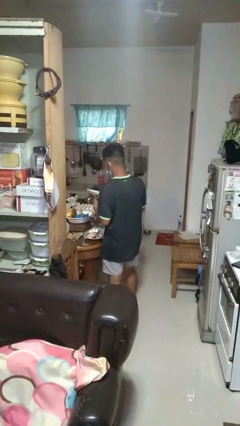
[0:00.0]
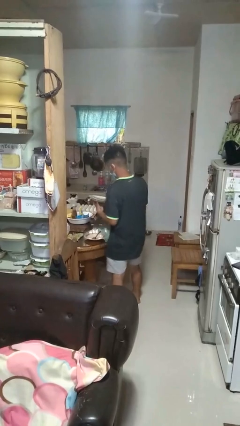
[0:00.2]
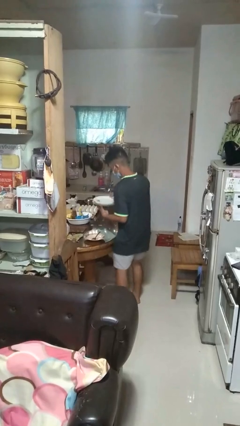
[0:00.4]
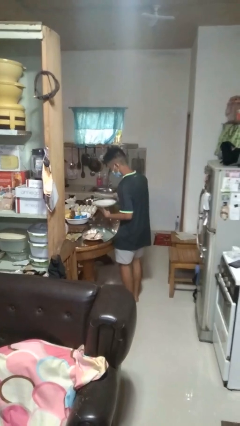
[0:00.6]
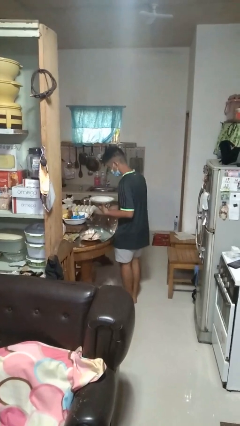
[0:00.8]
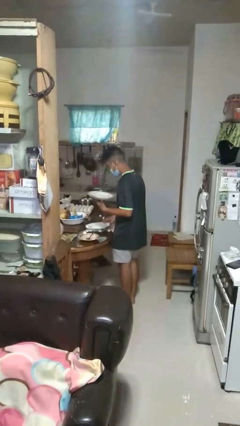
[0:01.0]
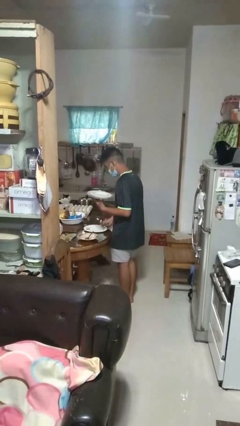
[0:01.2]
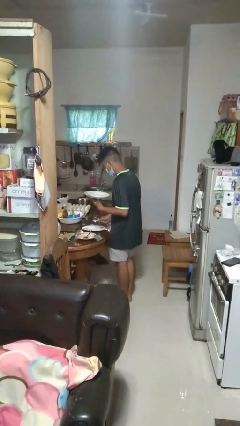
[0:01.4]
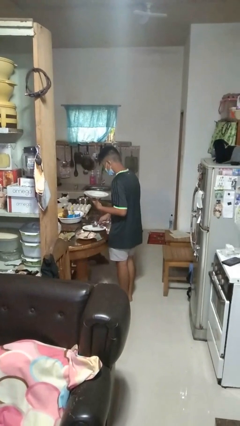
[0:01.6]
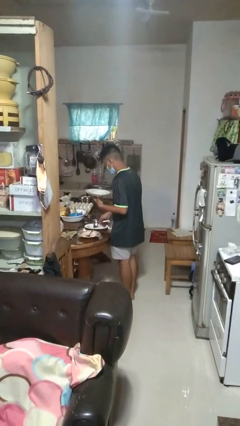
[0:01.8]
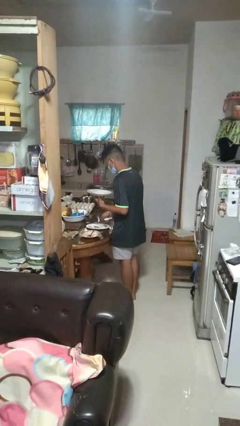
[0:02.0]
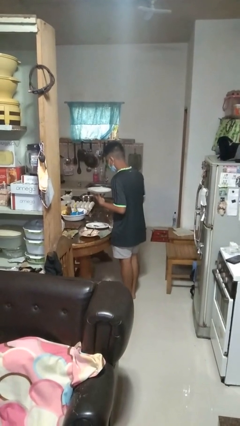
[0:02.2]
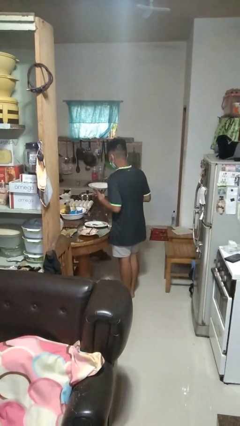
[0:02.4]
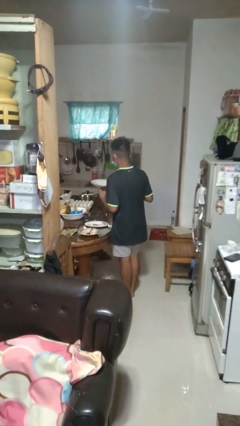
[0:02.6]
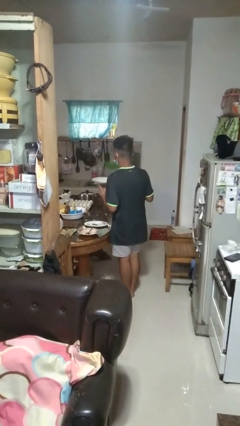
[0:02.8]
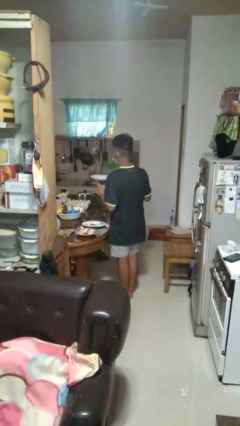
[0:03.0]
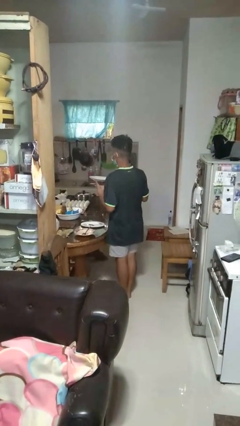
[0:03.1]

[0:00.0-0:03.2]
person sets table

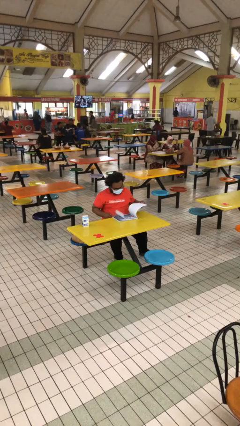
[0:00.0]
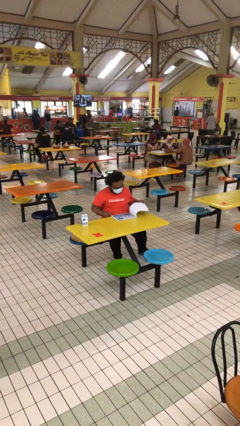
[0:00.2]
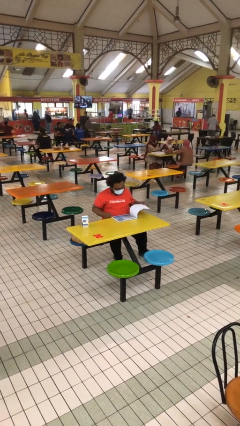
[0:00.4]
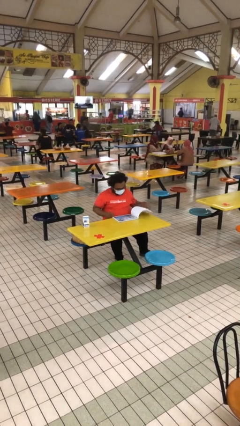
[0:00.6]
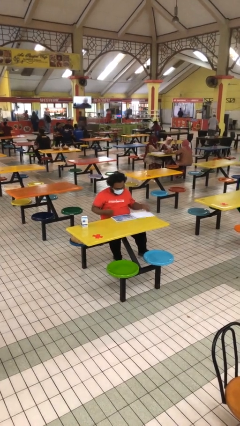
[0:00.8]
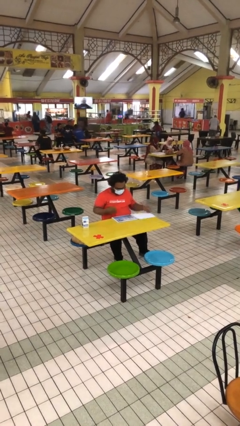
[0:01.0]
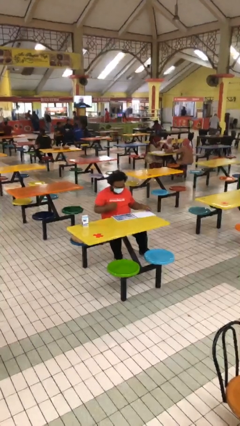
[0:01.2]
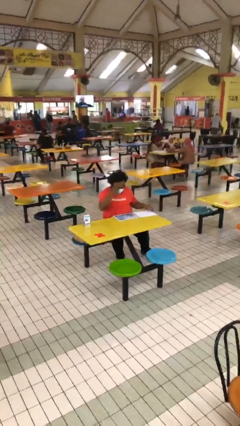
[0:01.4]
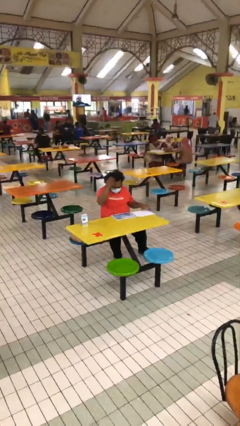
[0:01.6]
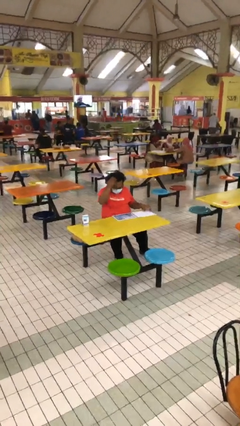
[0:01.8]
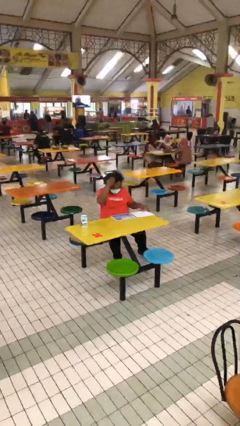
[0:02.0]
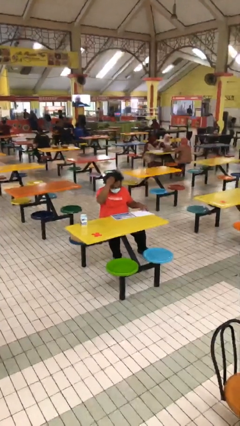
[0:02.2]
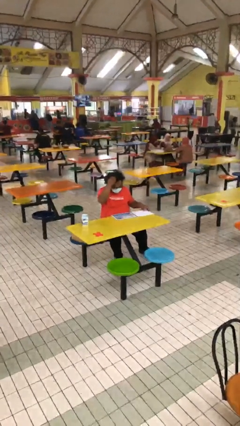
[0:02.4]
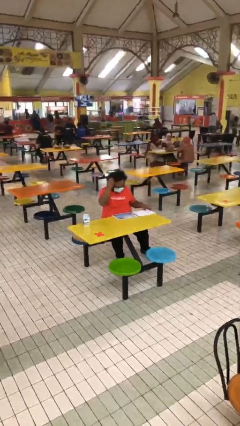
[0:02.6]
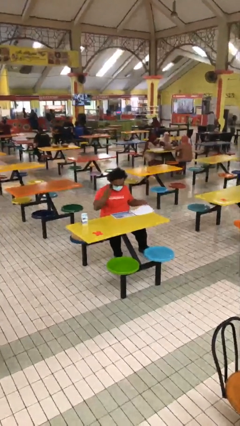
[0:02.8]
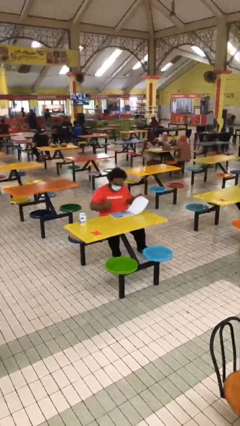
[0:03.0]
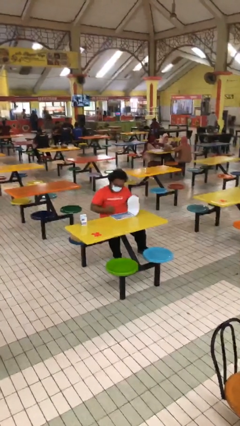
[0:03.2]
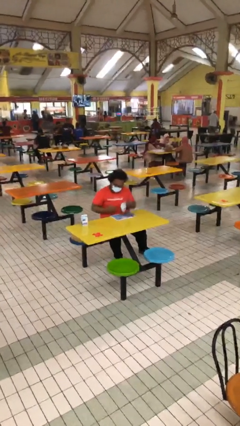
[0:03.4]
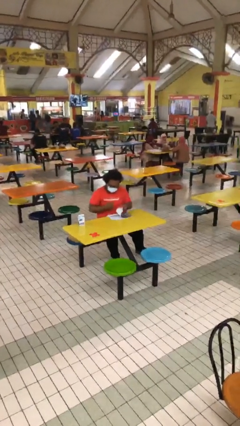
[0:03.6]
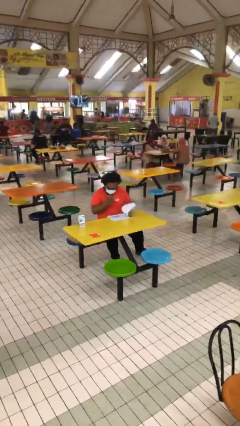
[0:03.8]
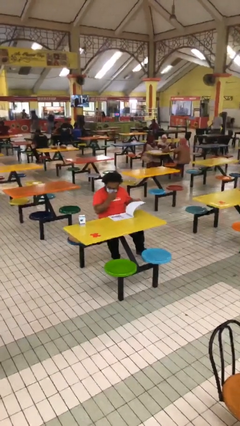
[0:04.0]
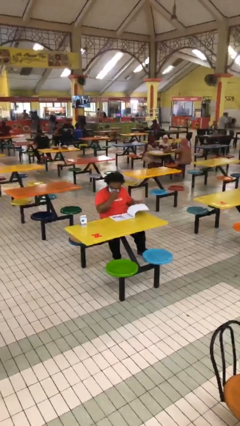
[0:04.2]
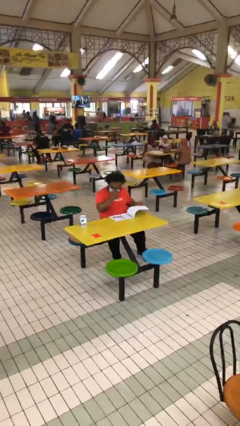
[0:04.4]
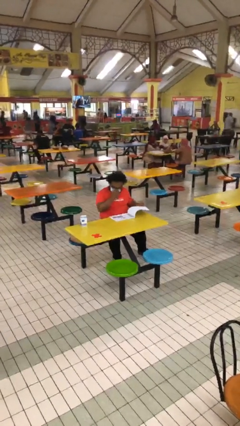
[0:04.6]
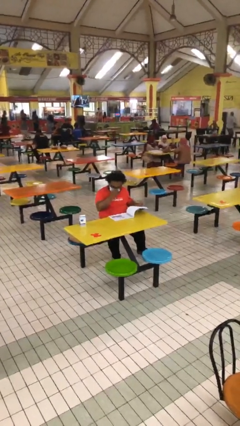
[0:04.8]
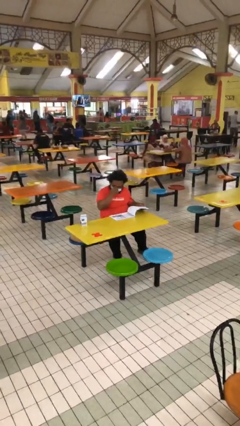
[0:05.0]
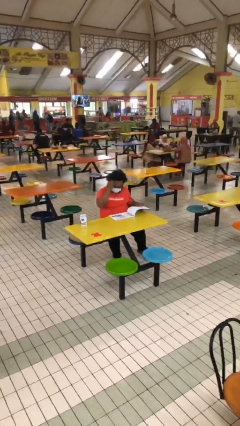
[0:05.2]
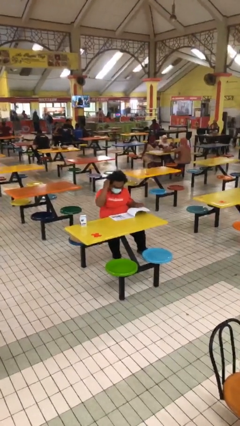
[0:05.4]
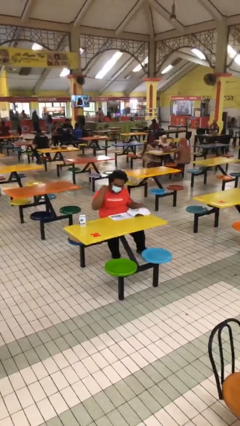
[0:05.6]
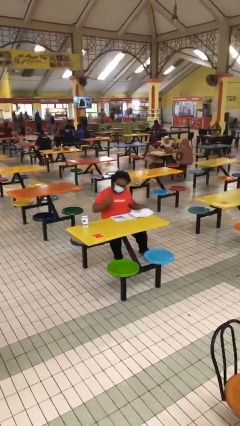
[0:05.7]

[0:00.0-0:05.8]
person reads document

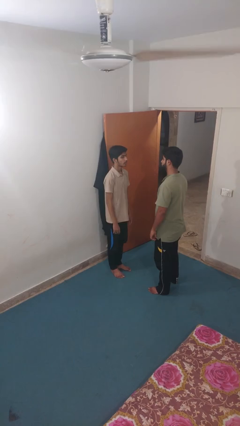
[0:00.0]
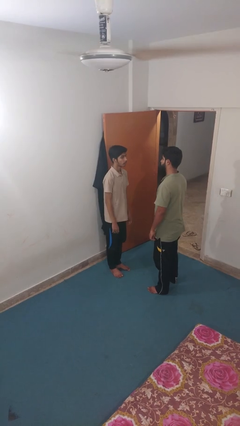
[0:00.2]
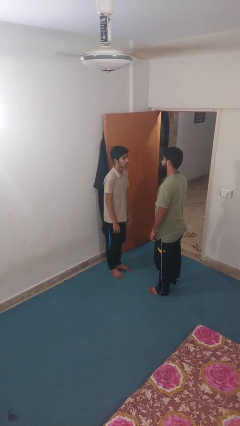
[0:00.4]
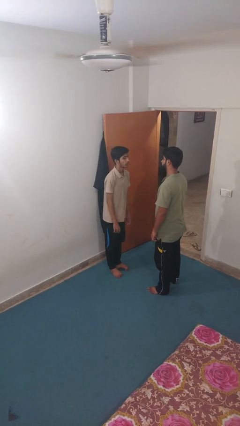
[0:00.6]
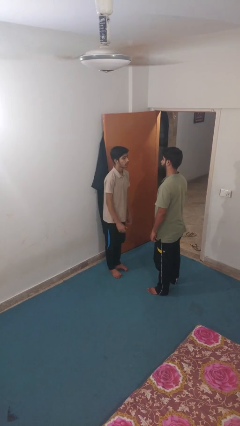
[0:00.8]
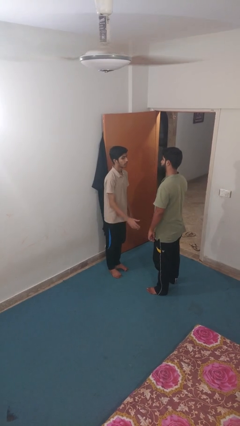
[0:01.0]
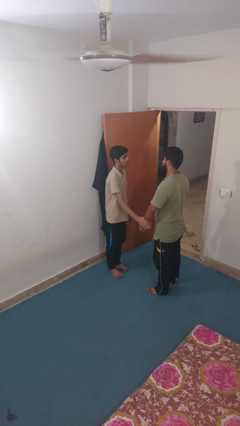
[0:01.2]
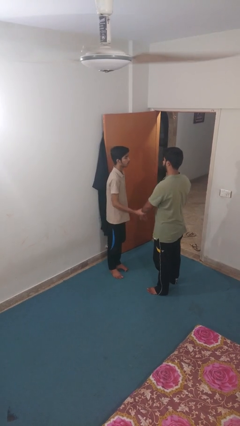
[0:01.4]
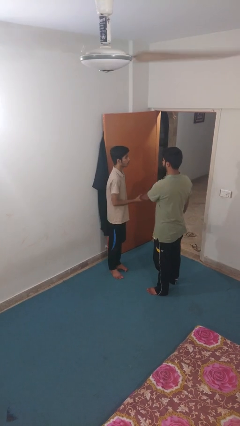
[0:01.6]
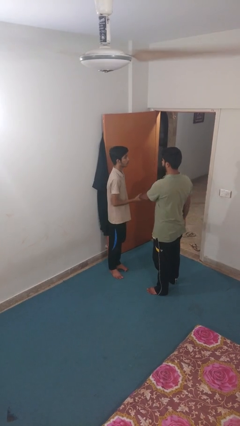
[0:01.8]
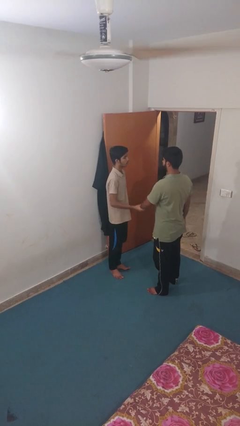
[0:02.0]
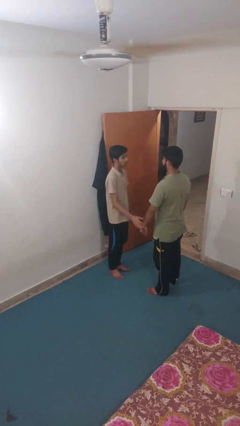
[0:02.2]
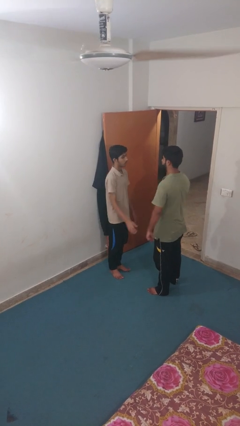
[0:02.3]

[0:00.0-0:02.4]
person grabs person by forearm

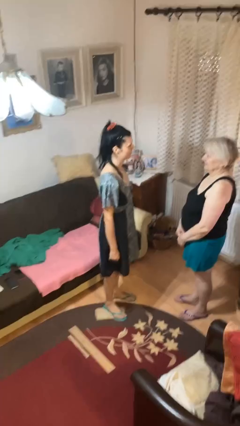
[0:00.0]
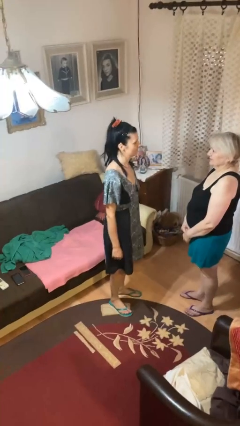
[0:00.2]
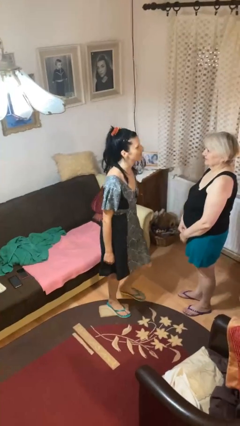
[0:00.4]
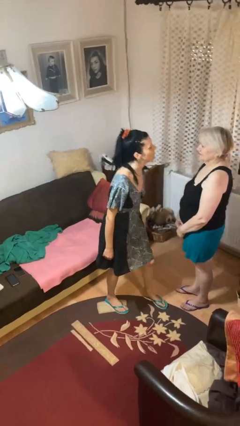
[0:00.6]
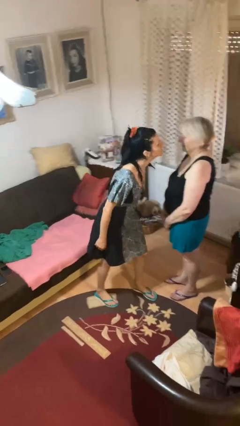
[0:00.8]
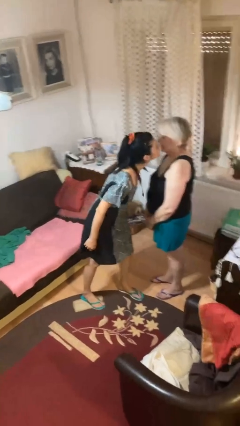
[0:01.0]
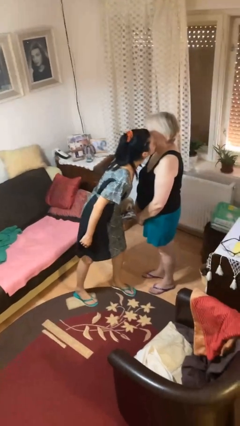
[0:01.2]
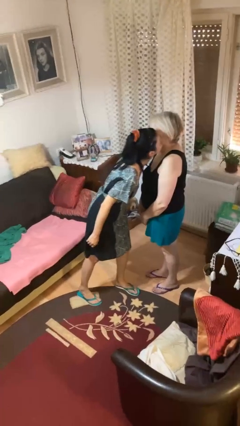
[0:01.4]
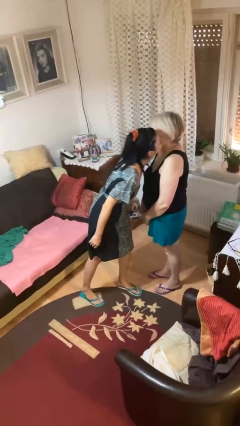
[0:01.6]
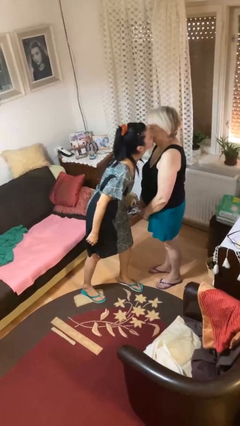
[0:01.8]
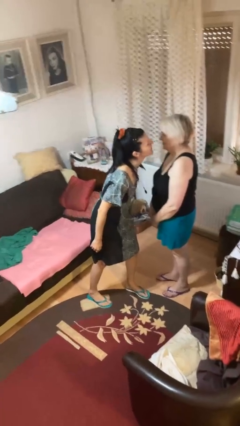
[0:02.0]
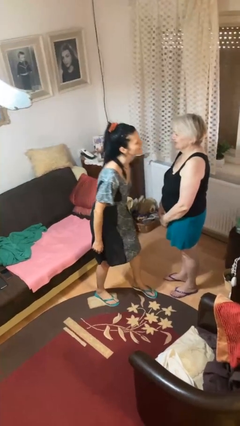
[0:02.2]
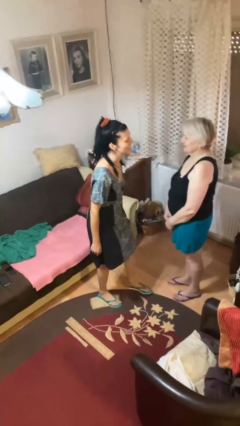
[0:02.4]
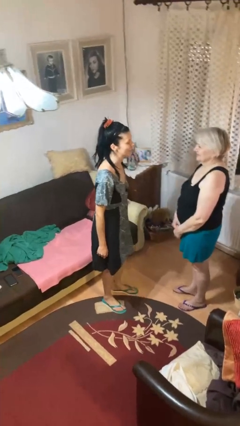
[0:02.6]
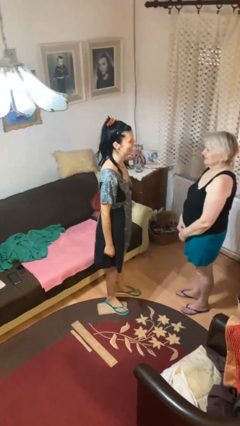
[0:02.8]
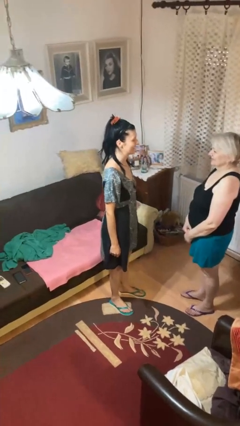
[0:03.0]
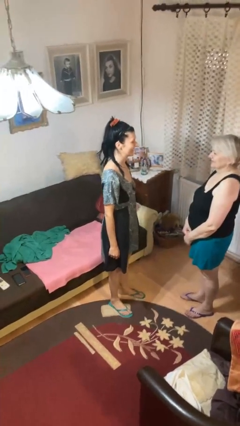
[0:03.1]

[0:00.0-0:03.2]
person kisses cheek of person

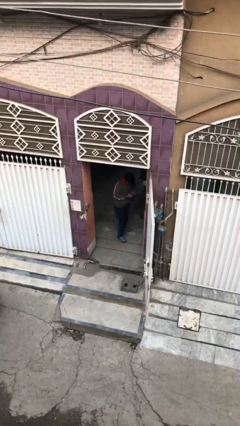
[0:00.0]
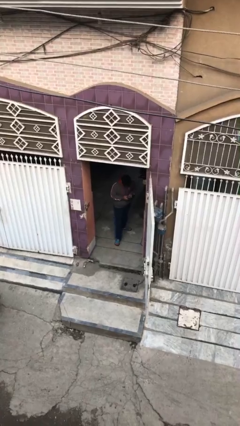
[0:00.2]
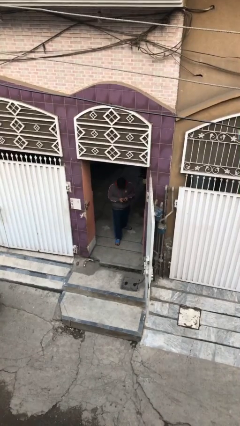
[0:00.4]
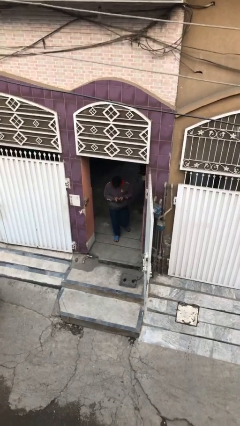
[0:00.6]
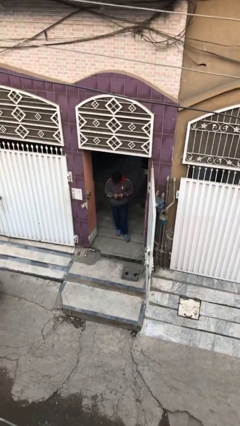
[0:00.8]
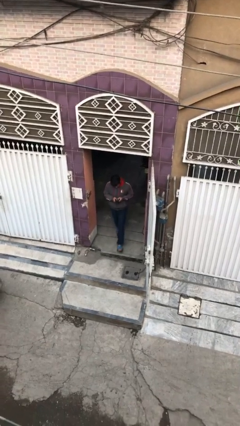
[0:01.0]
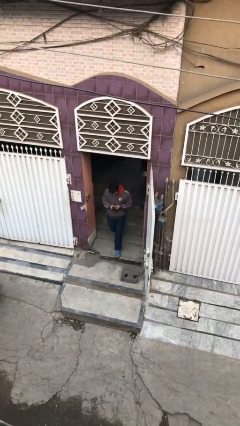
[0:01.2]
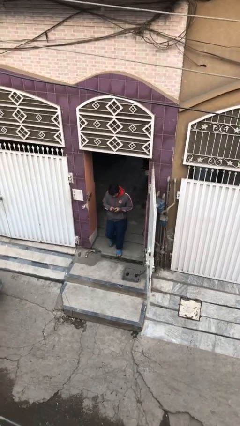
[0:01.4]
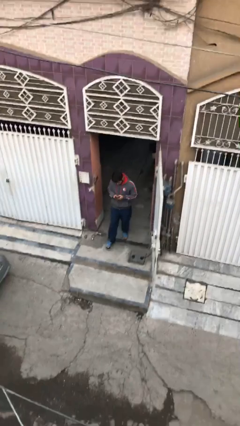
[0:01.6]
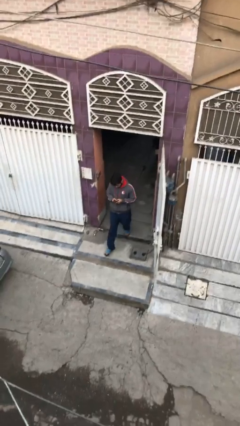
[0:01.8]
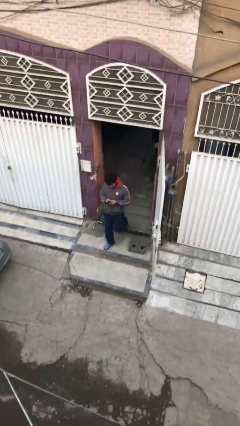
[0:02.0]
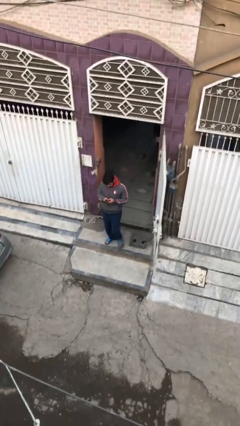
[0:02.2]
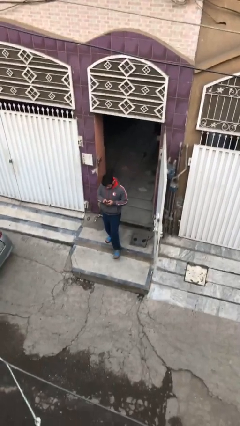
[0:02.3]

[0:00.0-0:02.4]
person enters scene through structure

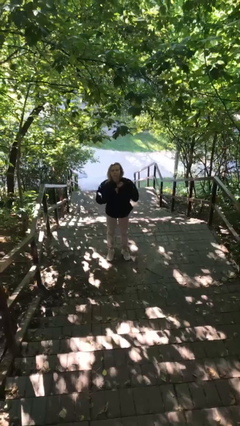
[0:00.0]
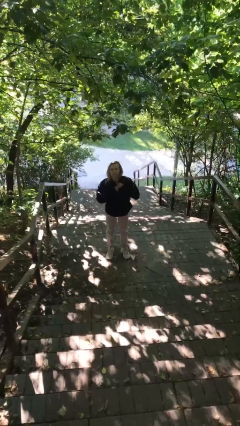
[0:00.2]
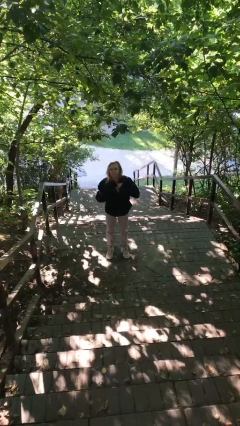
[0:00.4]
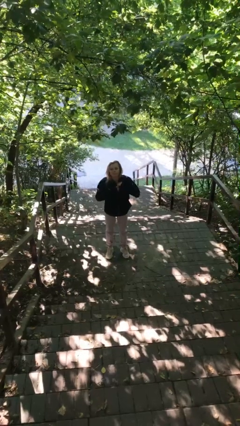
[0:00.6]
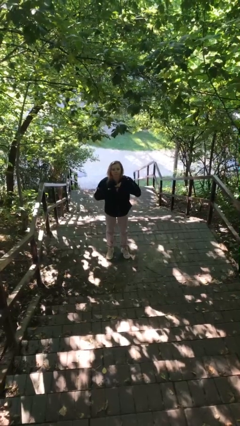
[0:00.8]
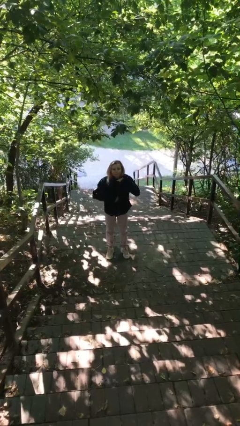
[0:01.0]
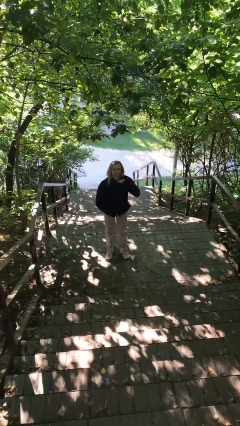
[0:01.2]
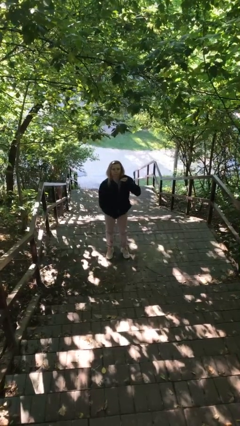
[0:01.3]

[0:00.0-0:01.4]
person unzips jacket
